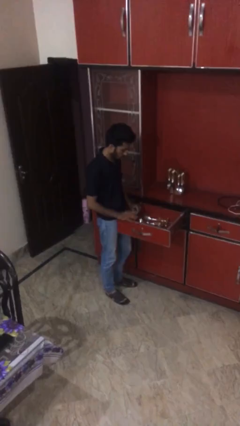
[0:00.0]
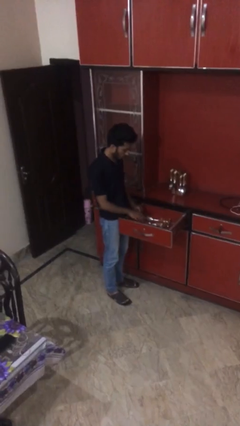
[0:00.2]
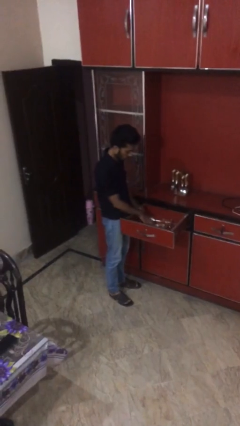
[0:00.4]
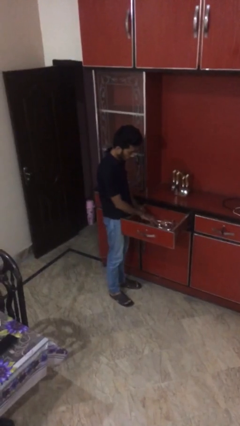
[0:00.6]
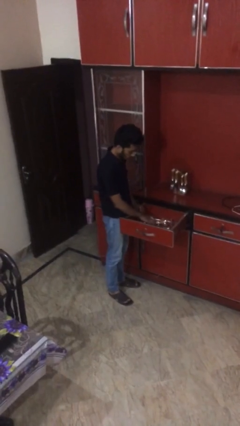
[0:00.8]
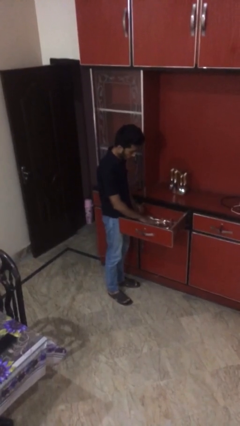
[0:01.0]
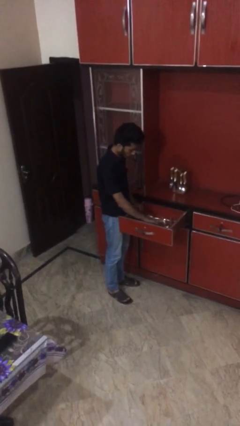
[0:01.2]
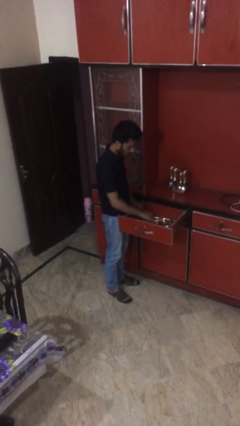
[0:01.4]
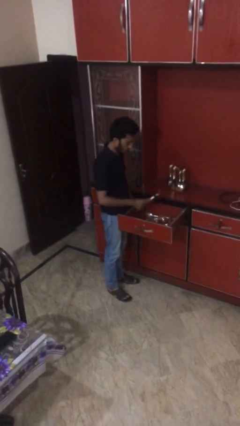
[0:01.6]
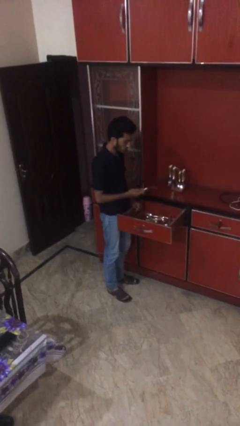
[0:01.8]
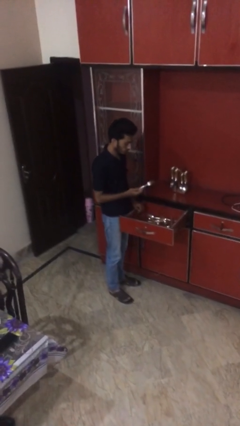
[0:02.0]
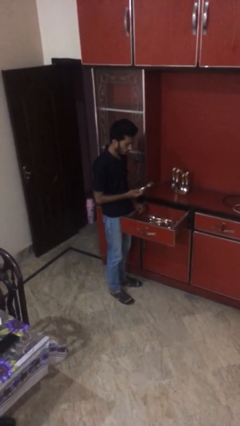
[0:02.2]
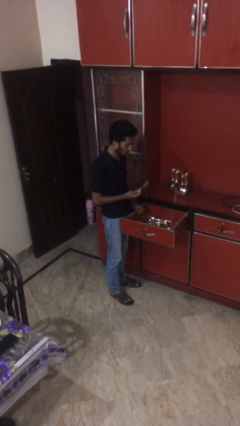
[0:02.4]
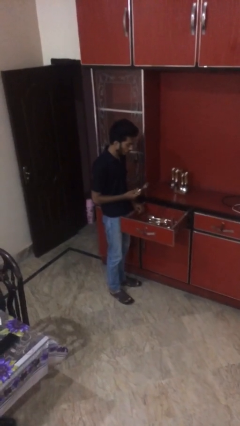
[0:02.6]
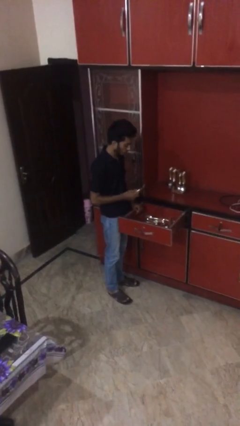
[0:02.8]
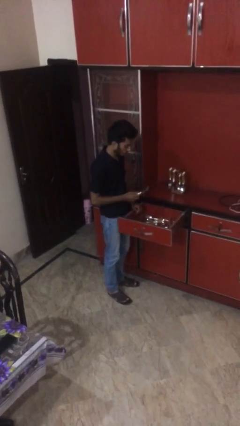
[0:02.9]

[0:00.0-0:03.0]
person takes object from kitchen drawer

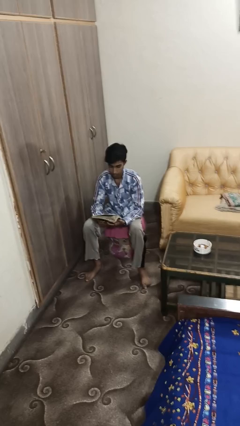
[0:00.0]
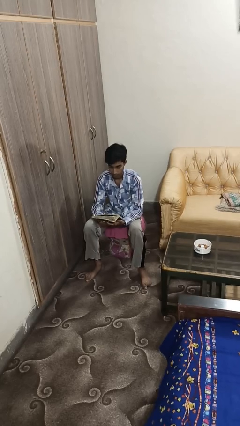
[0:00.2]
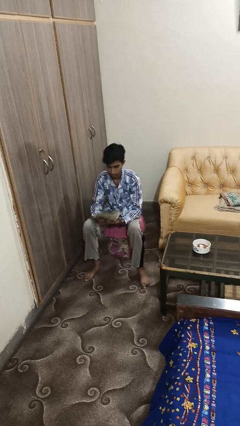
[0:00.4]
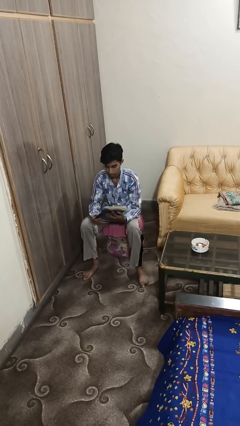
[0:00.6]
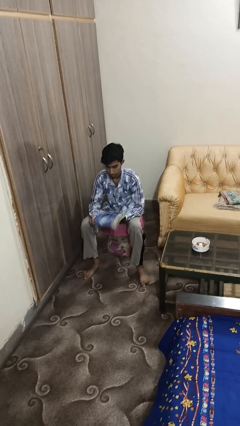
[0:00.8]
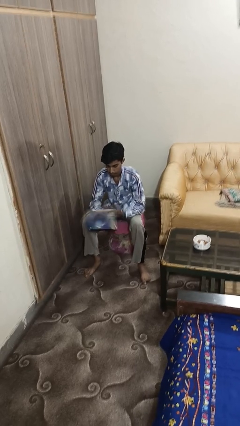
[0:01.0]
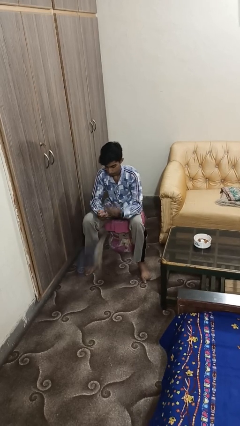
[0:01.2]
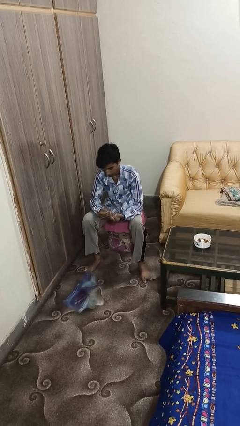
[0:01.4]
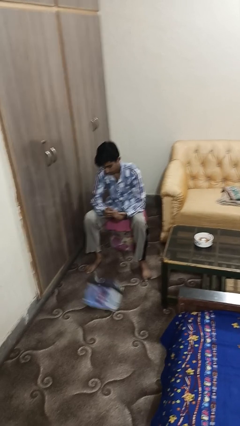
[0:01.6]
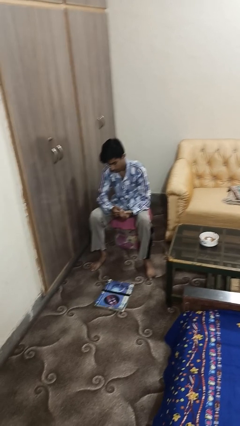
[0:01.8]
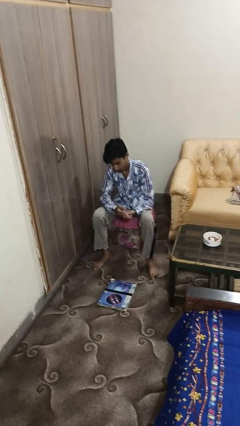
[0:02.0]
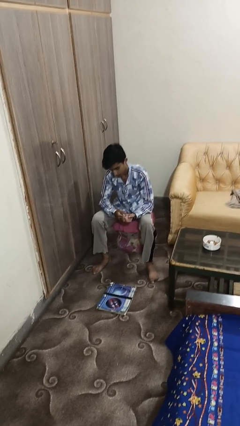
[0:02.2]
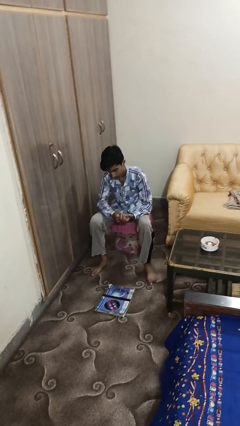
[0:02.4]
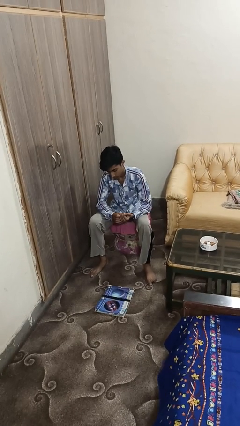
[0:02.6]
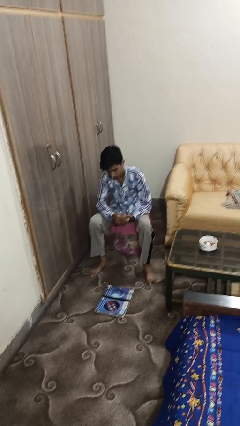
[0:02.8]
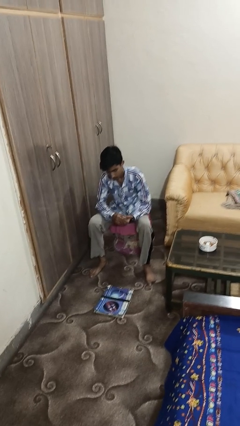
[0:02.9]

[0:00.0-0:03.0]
person drops object

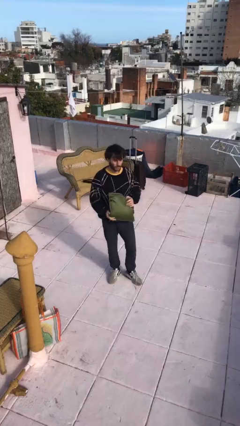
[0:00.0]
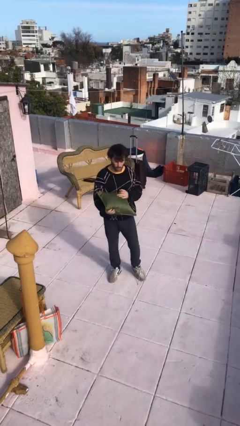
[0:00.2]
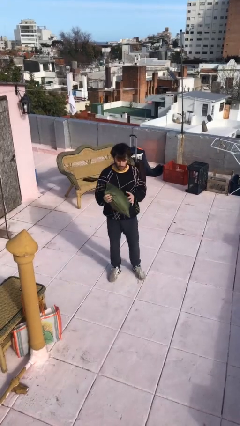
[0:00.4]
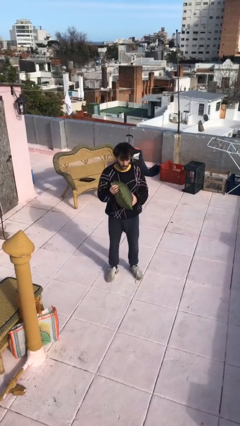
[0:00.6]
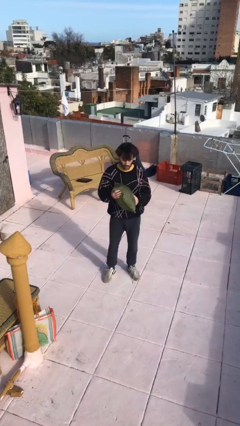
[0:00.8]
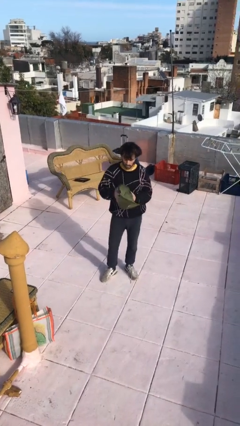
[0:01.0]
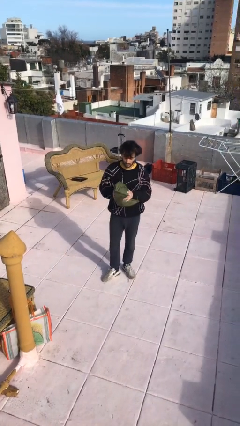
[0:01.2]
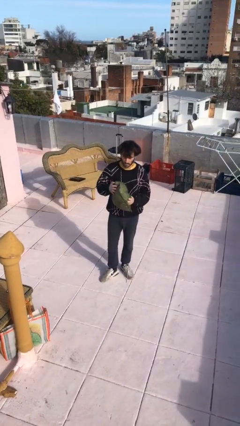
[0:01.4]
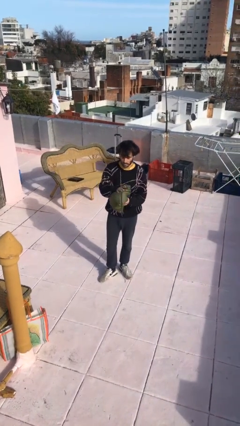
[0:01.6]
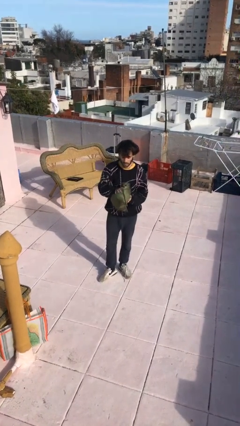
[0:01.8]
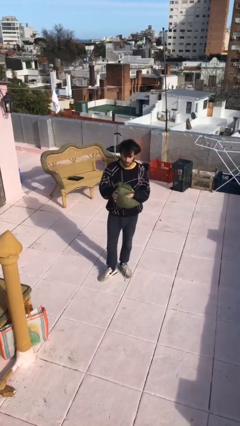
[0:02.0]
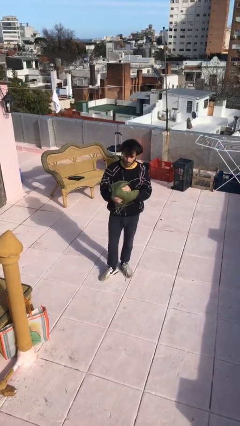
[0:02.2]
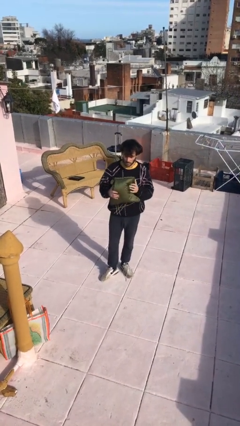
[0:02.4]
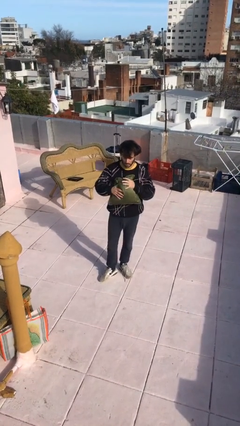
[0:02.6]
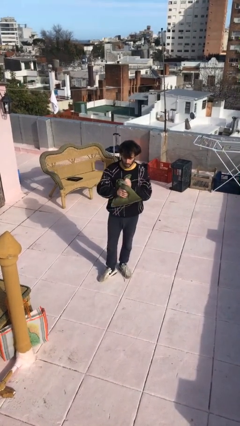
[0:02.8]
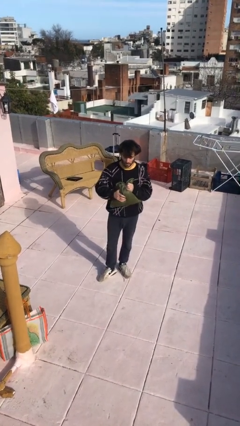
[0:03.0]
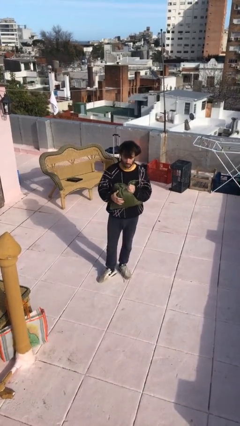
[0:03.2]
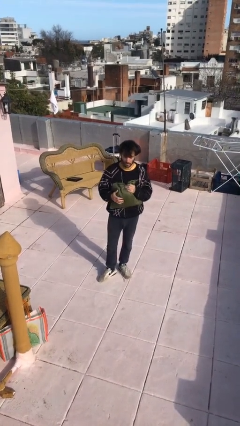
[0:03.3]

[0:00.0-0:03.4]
person squeezes object

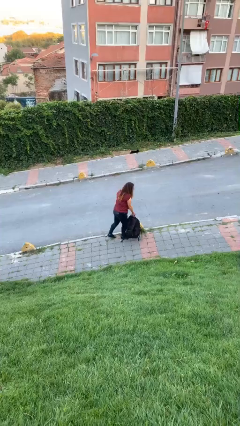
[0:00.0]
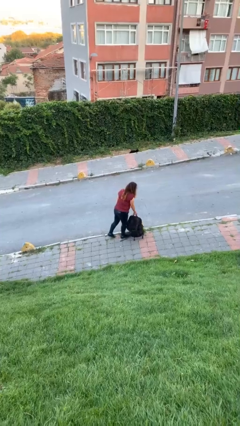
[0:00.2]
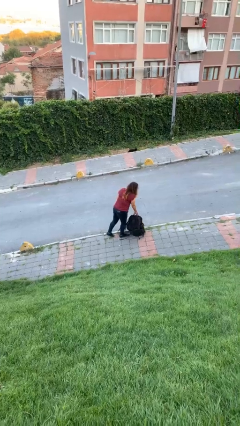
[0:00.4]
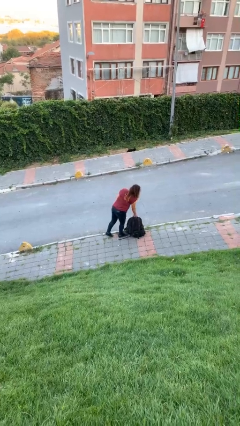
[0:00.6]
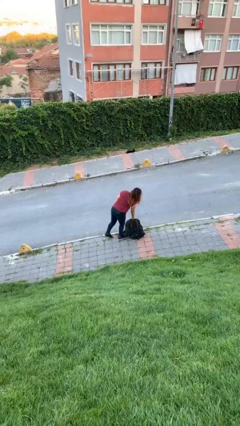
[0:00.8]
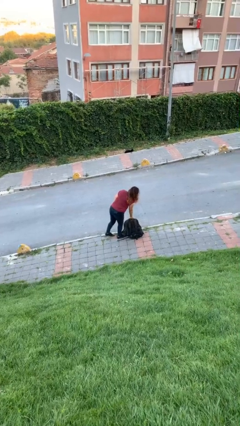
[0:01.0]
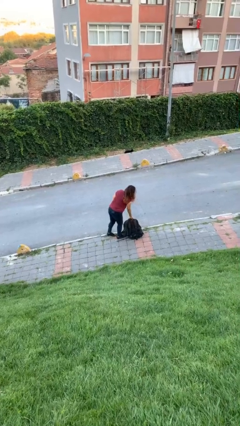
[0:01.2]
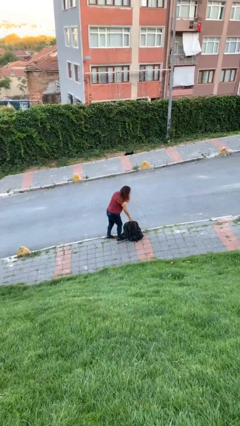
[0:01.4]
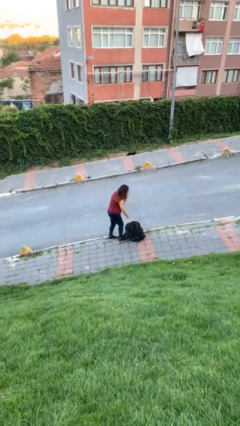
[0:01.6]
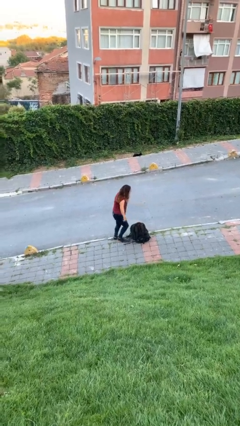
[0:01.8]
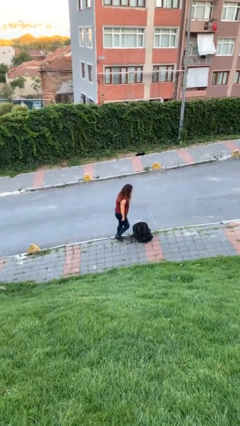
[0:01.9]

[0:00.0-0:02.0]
person puts down object on floor

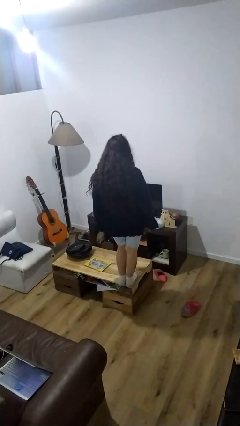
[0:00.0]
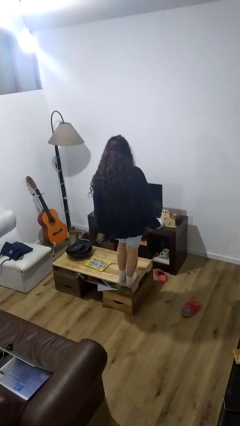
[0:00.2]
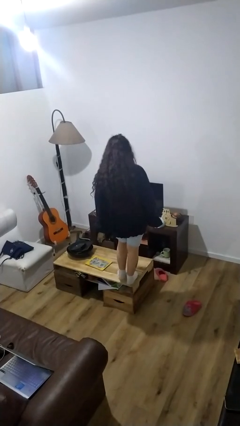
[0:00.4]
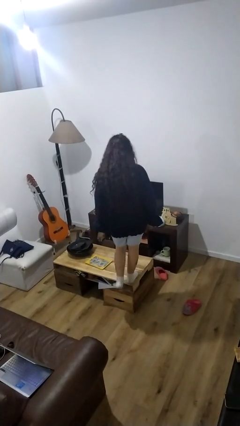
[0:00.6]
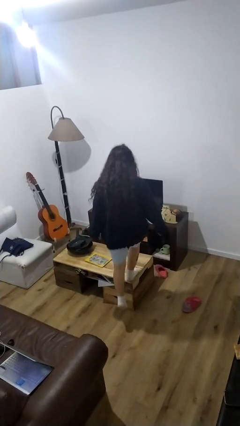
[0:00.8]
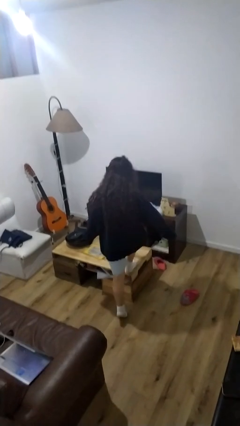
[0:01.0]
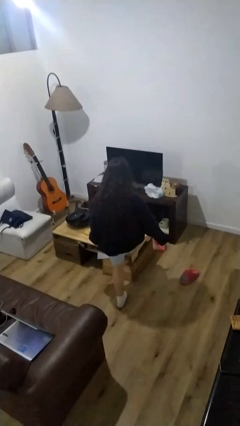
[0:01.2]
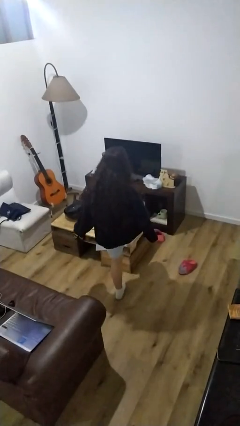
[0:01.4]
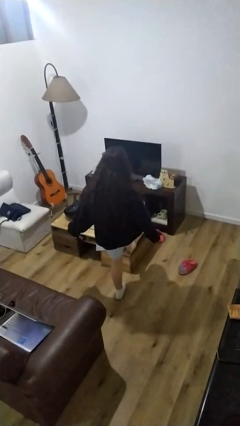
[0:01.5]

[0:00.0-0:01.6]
person climbs off table

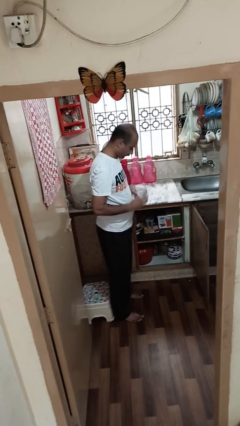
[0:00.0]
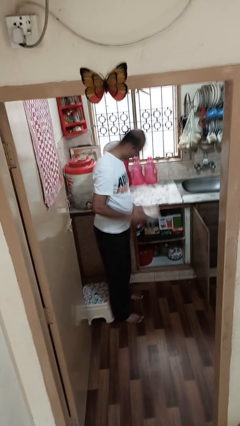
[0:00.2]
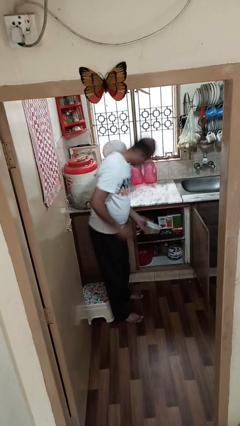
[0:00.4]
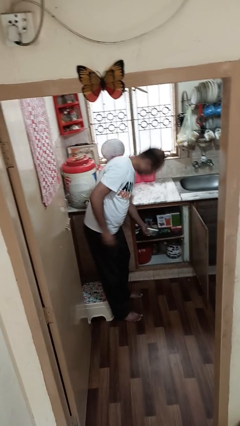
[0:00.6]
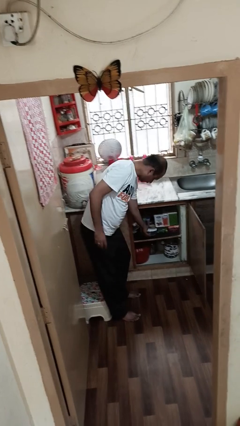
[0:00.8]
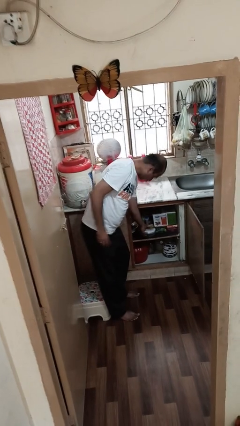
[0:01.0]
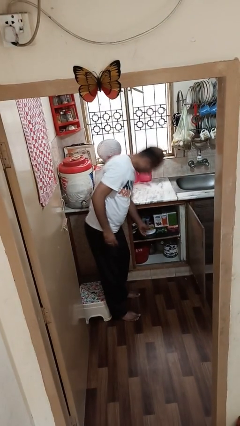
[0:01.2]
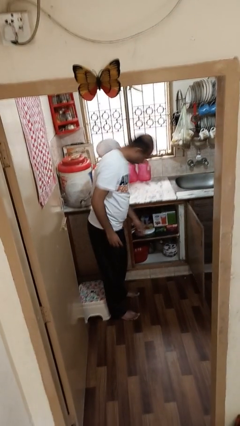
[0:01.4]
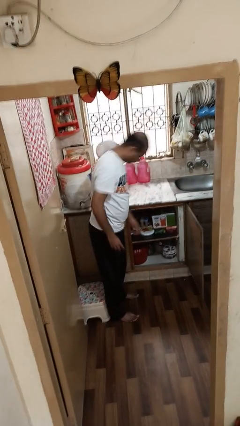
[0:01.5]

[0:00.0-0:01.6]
person puts down object into cabinet

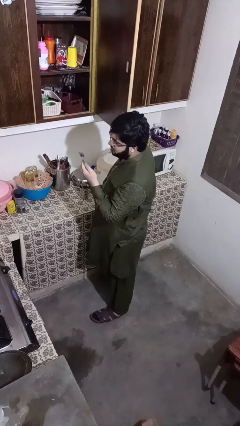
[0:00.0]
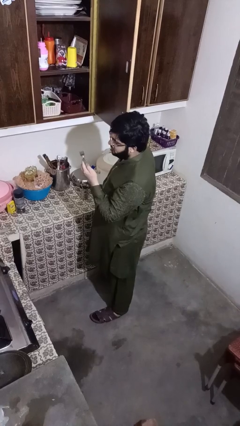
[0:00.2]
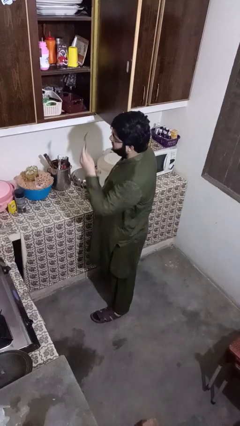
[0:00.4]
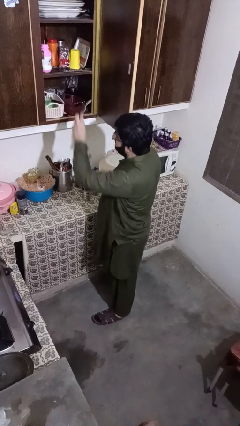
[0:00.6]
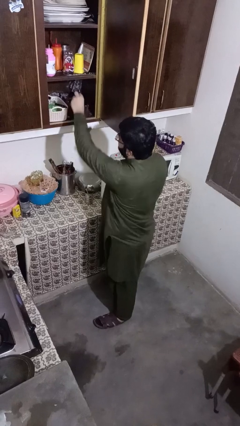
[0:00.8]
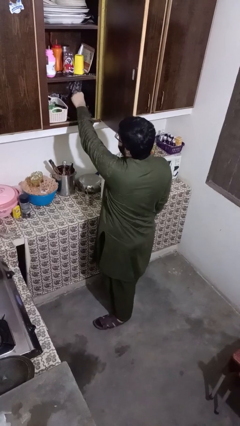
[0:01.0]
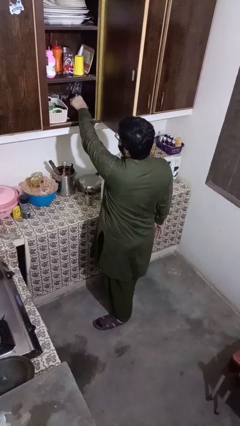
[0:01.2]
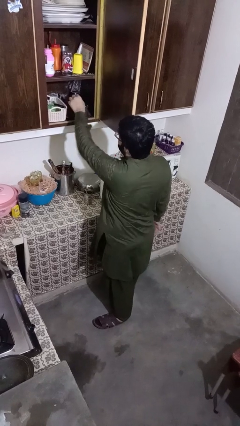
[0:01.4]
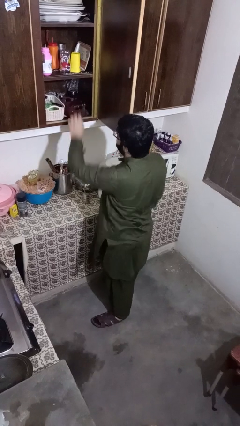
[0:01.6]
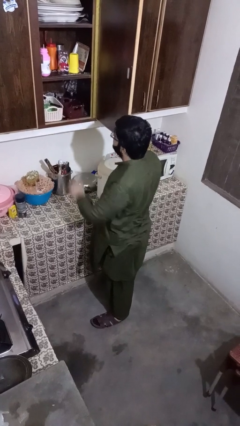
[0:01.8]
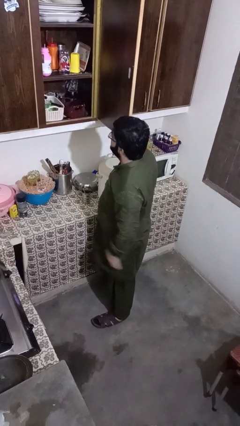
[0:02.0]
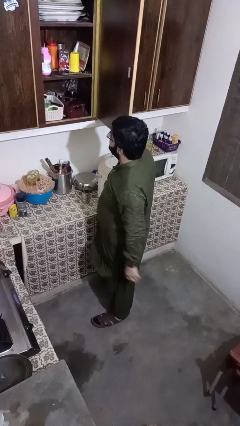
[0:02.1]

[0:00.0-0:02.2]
person puts object into kitchen drawer

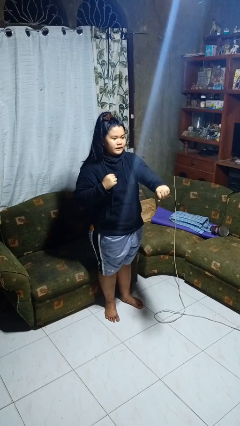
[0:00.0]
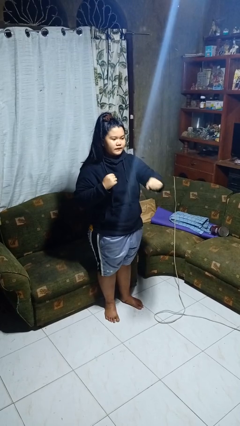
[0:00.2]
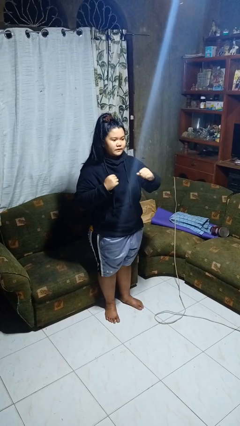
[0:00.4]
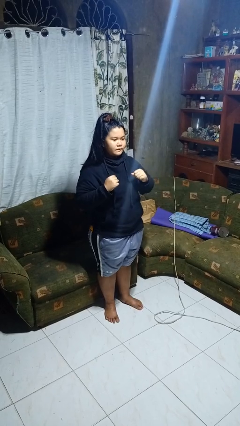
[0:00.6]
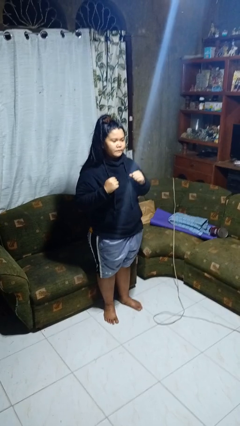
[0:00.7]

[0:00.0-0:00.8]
person punches
